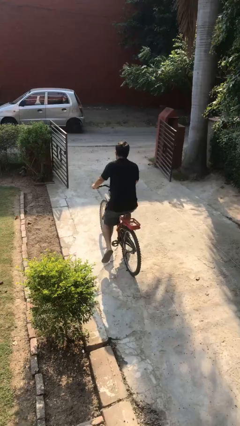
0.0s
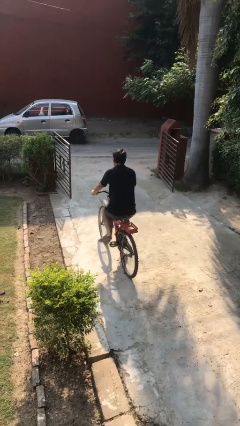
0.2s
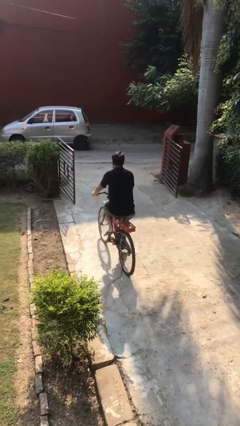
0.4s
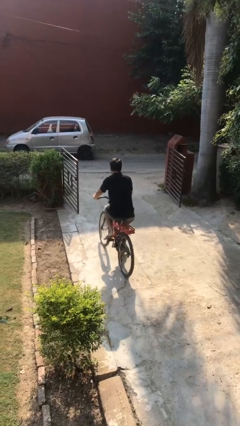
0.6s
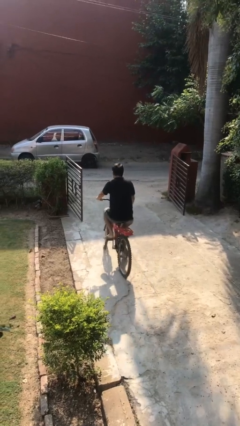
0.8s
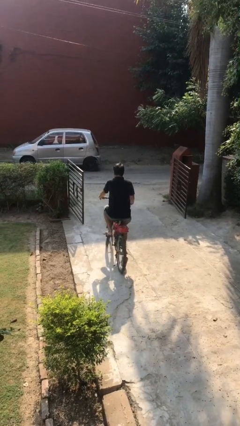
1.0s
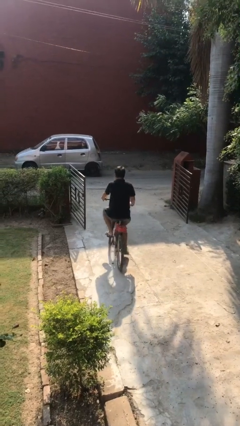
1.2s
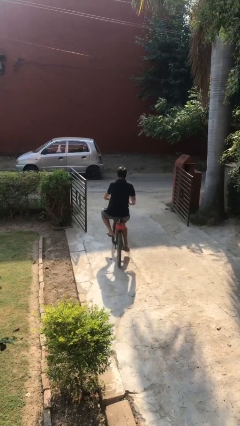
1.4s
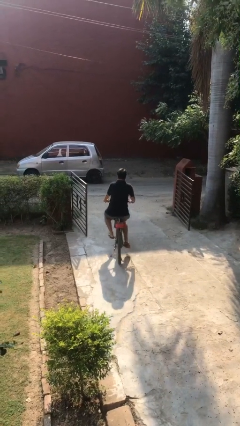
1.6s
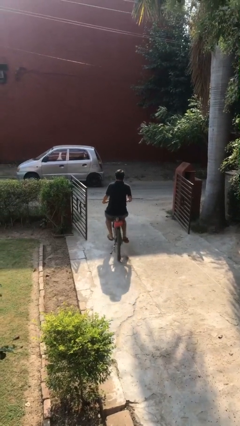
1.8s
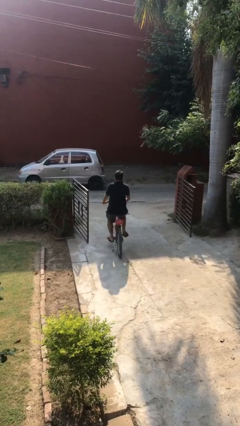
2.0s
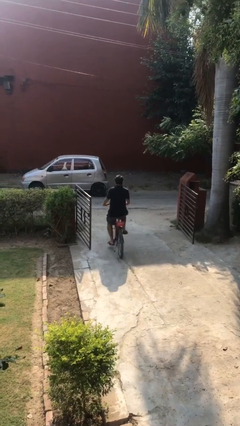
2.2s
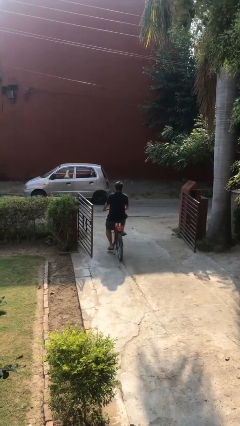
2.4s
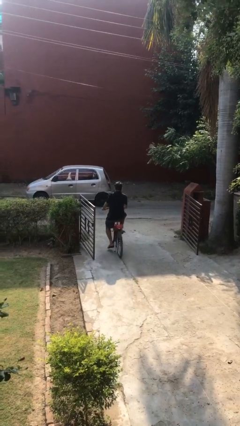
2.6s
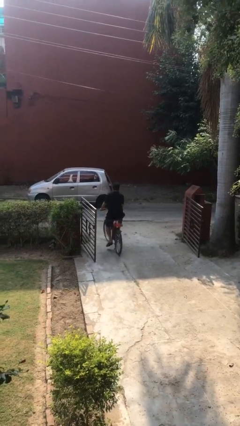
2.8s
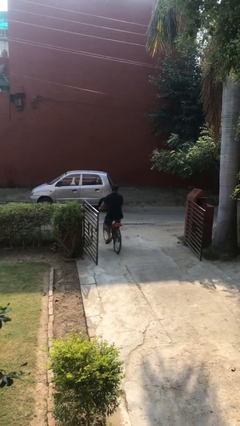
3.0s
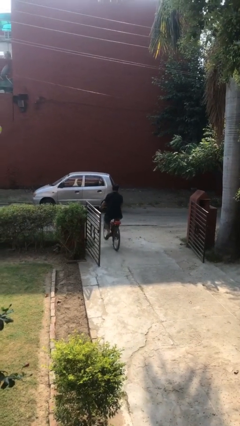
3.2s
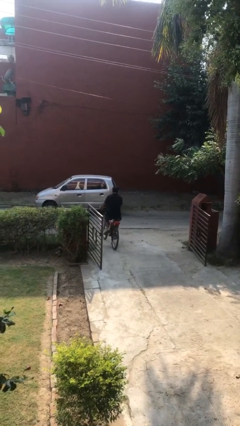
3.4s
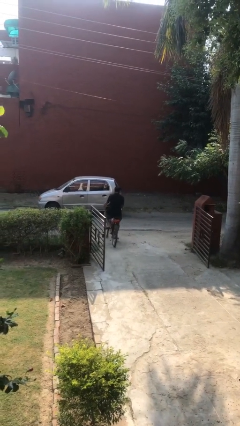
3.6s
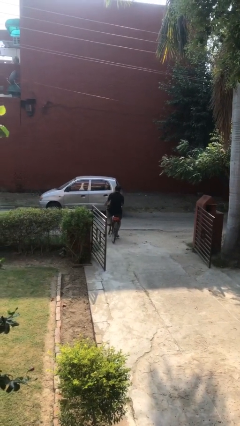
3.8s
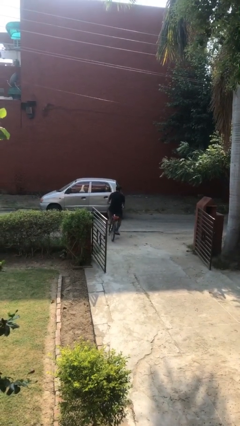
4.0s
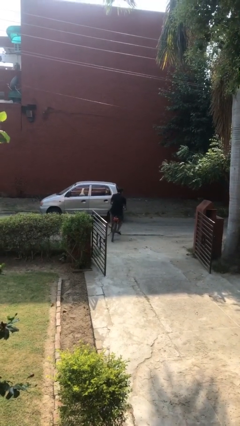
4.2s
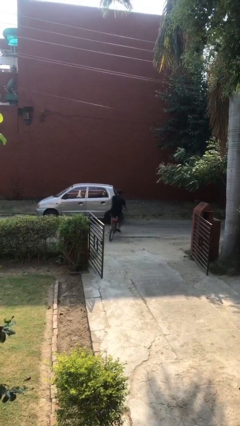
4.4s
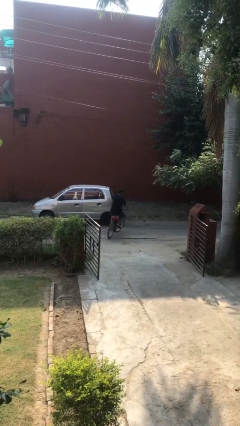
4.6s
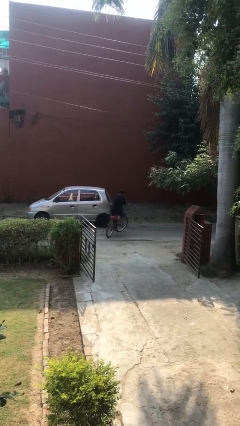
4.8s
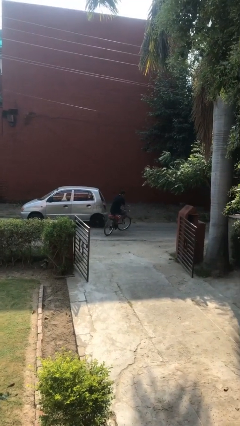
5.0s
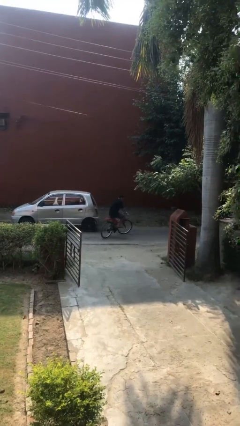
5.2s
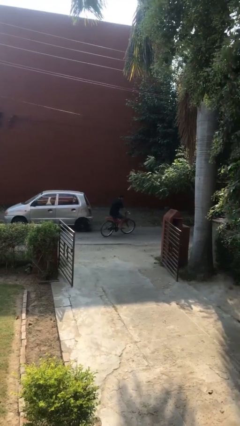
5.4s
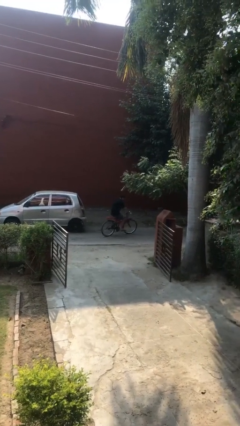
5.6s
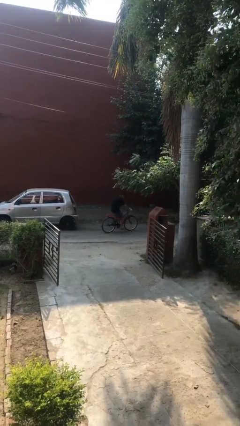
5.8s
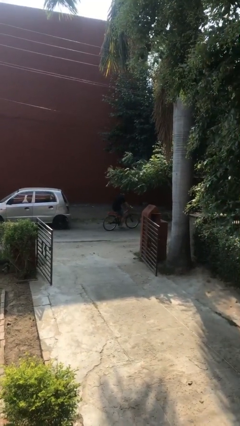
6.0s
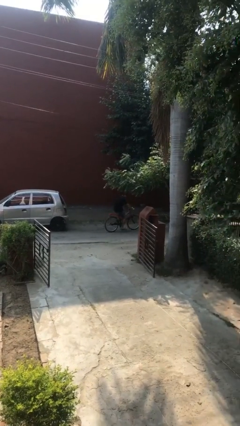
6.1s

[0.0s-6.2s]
person rides bicycle

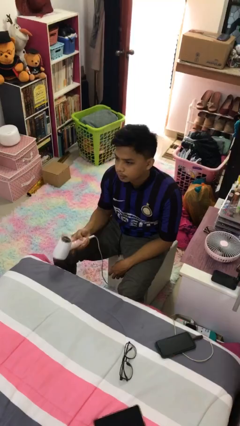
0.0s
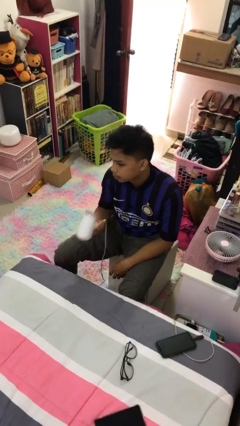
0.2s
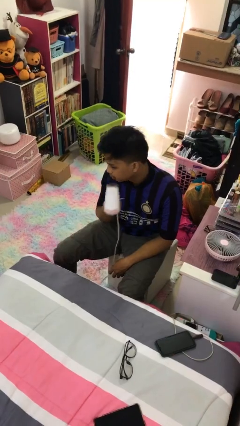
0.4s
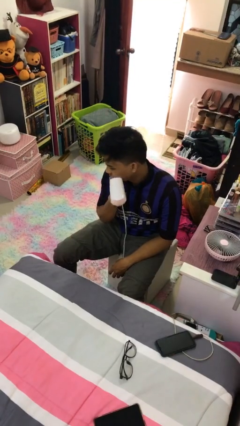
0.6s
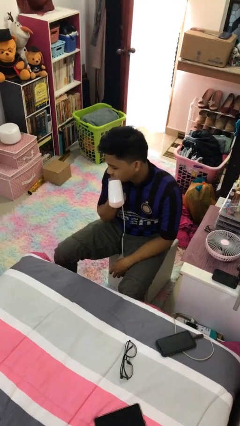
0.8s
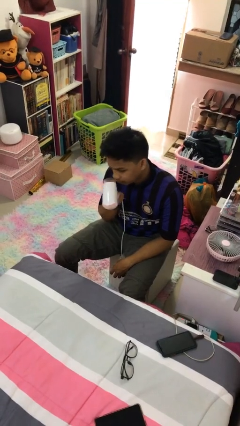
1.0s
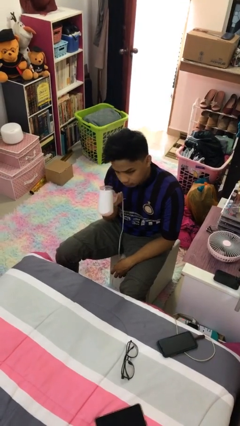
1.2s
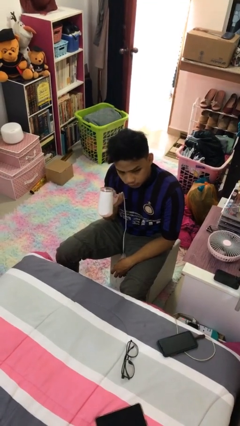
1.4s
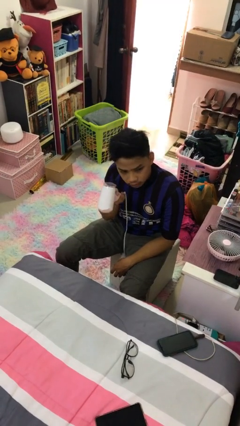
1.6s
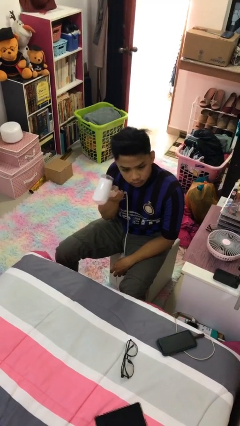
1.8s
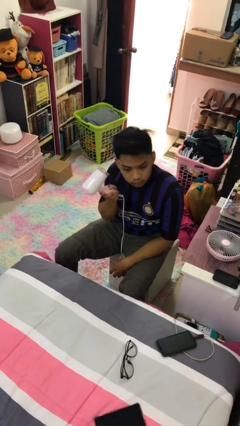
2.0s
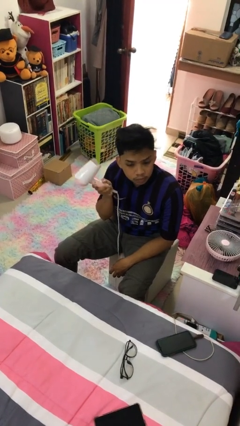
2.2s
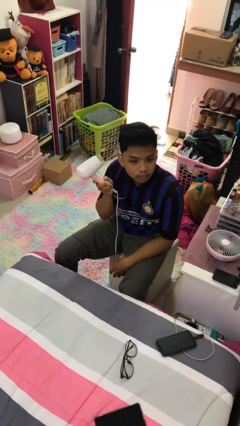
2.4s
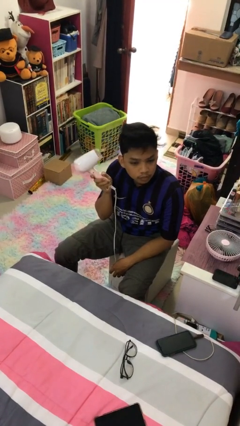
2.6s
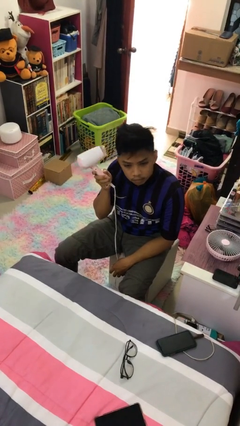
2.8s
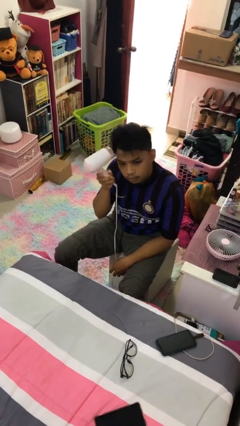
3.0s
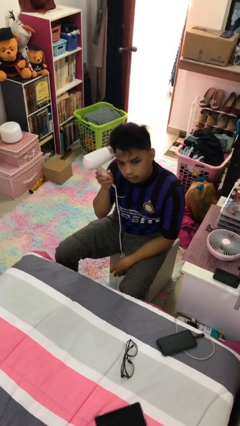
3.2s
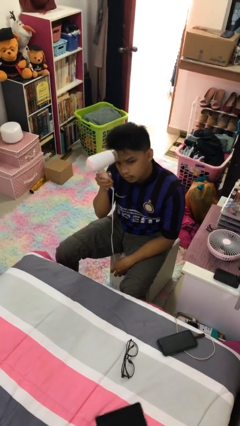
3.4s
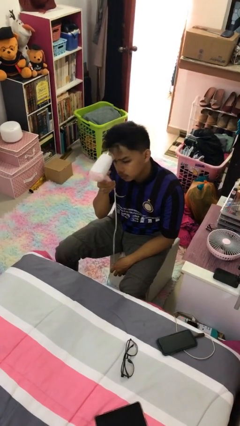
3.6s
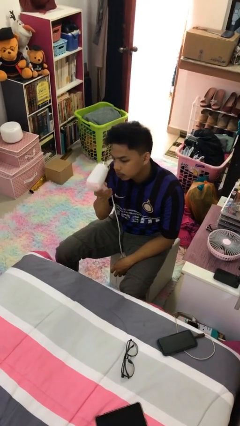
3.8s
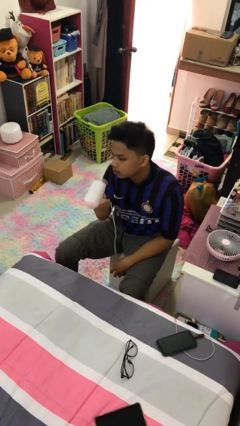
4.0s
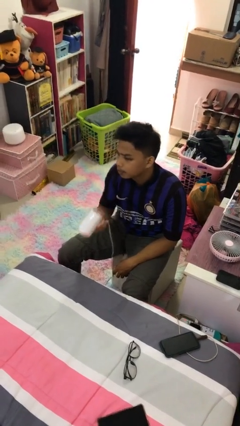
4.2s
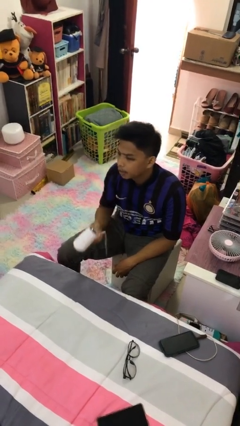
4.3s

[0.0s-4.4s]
person dries hair with hairdryer

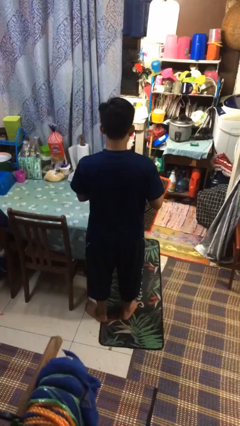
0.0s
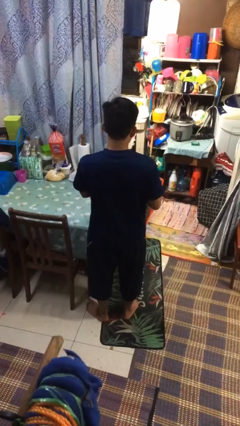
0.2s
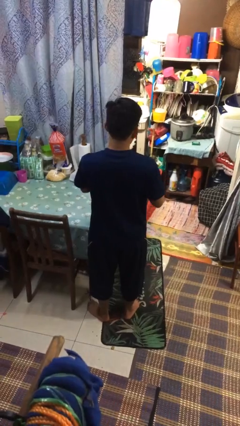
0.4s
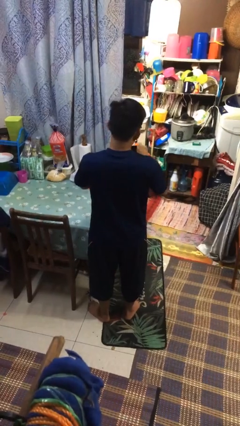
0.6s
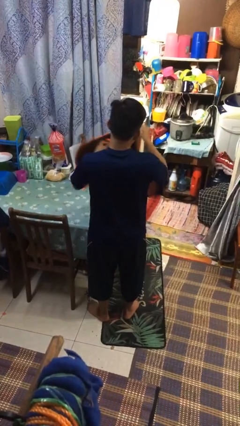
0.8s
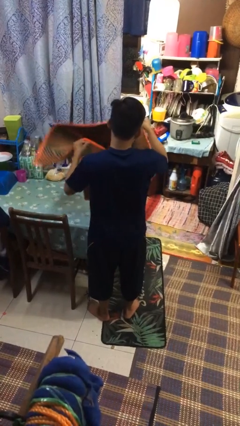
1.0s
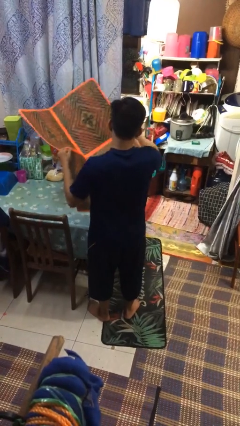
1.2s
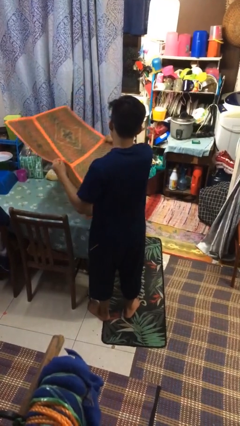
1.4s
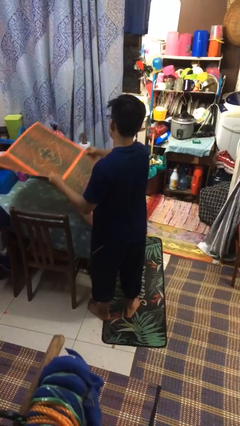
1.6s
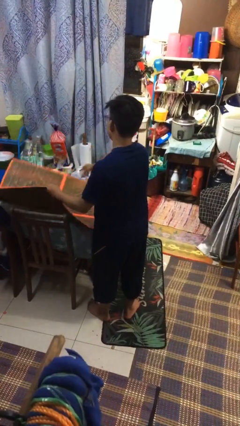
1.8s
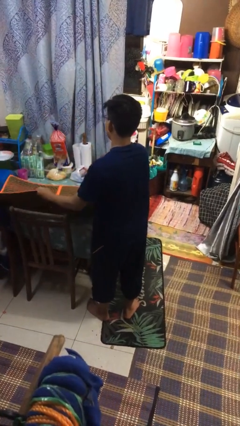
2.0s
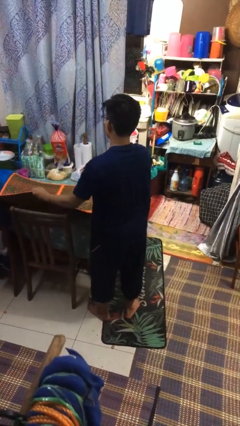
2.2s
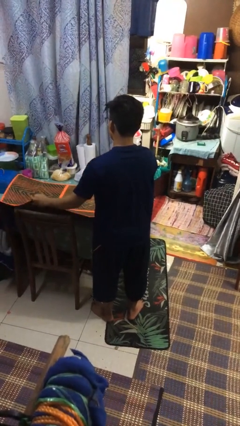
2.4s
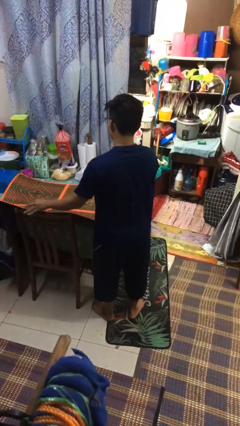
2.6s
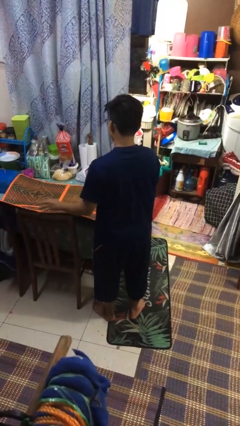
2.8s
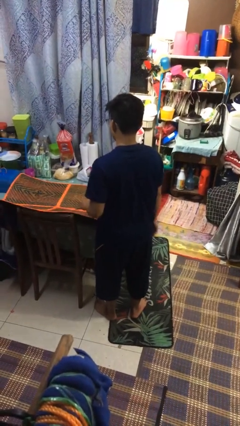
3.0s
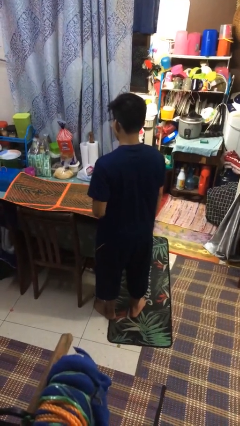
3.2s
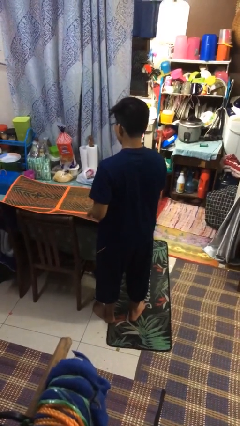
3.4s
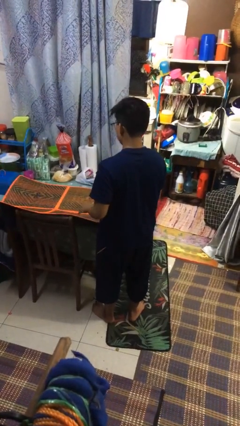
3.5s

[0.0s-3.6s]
person spreads tablecloth

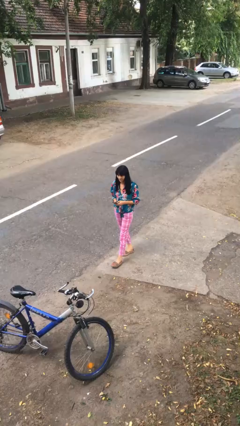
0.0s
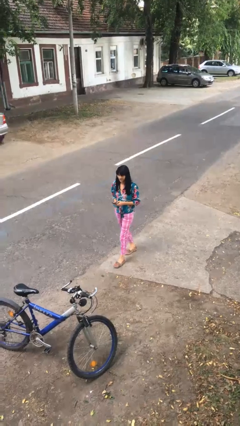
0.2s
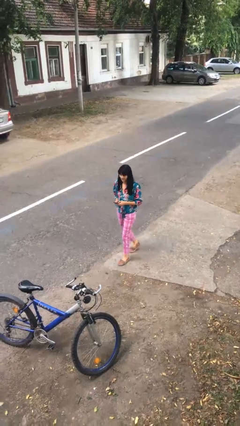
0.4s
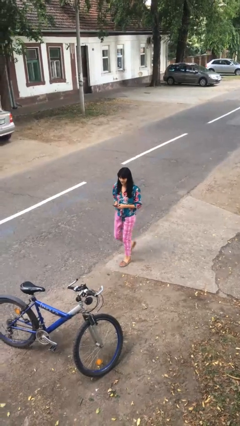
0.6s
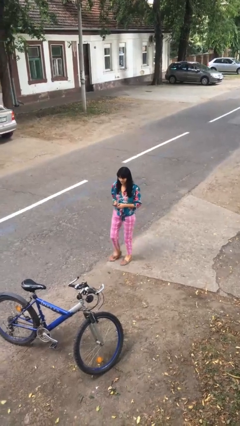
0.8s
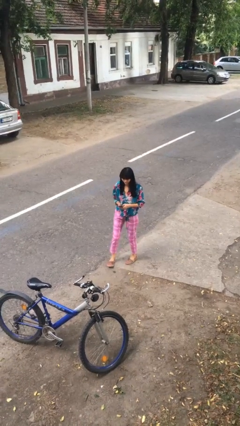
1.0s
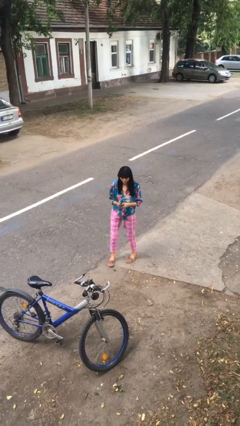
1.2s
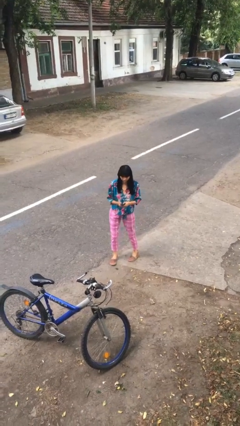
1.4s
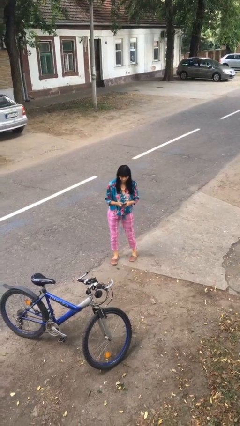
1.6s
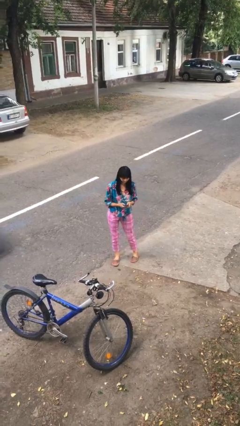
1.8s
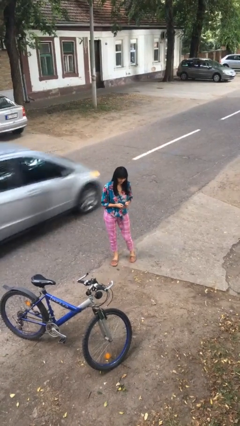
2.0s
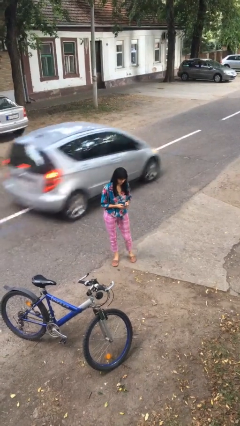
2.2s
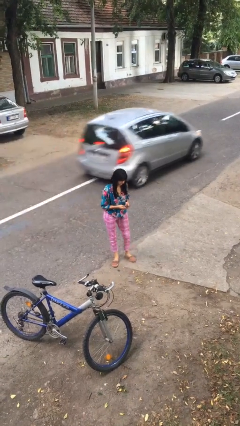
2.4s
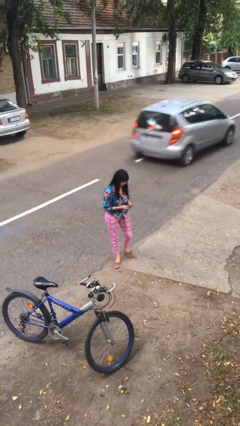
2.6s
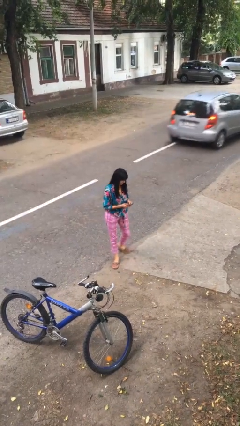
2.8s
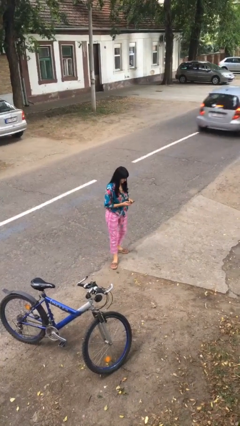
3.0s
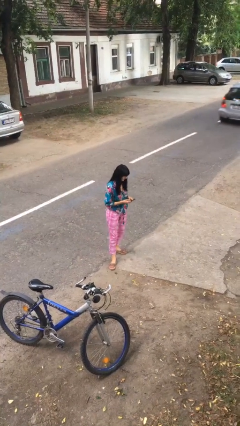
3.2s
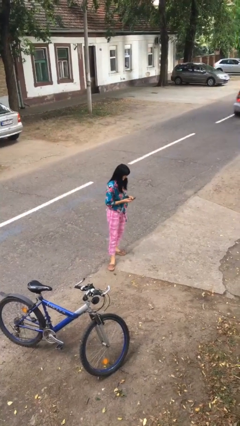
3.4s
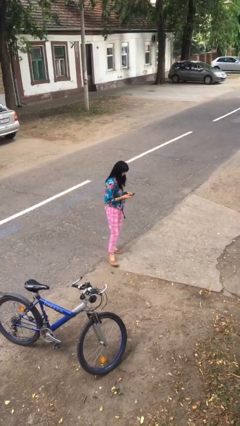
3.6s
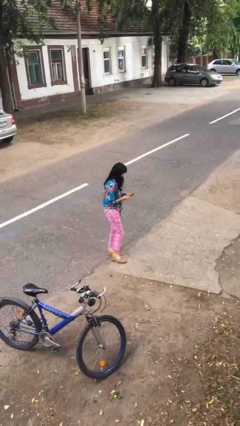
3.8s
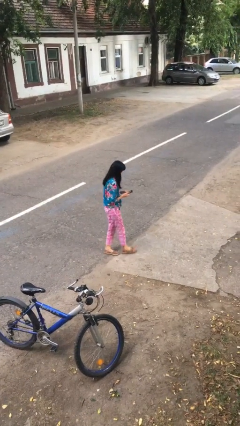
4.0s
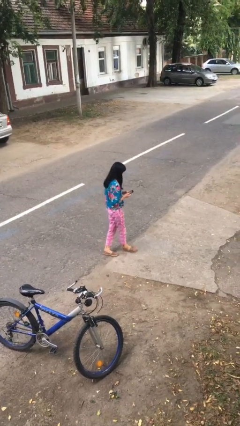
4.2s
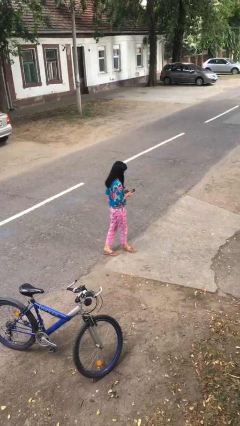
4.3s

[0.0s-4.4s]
person texts on phone
